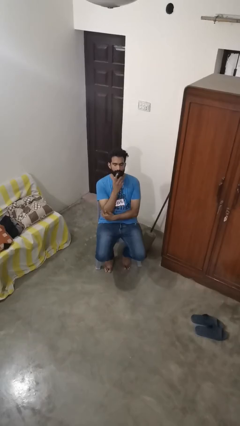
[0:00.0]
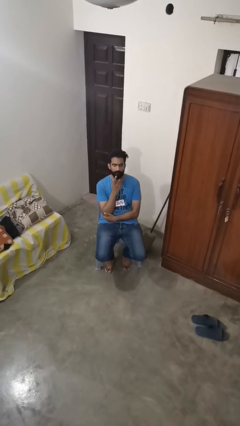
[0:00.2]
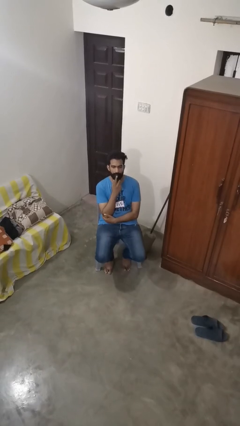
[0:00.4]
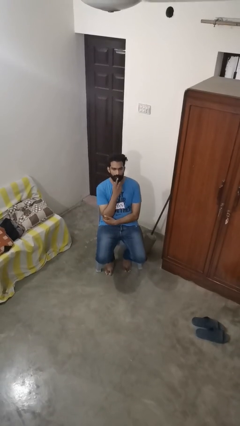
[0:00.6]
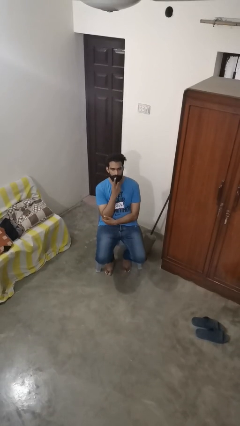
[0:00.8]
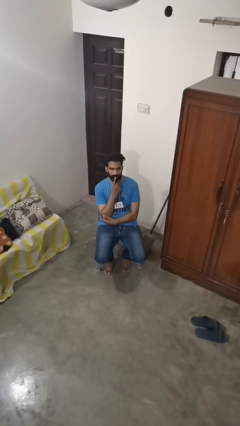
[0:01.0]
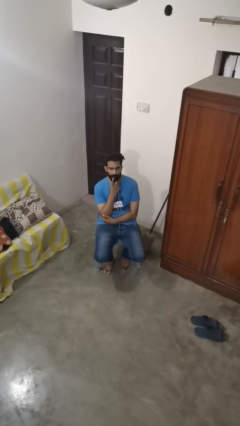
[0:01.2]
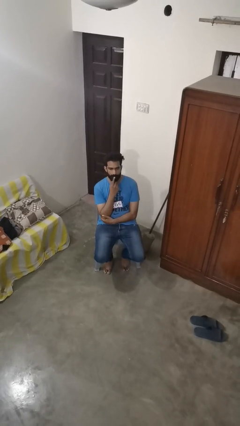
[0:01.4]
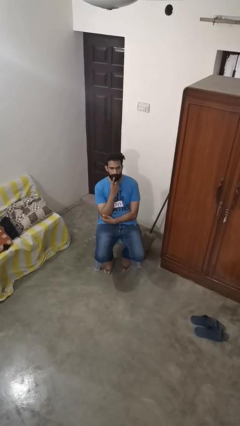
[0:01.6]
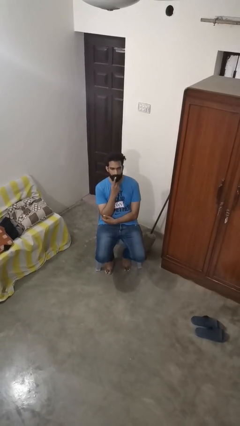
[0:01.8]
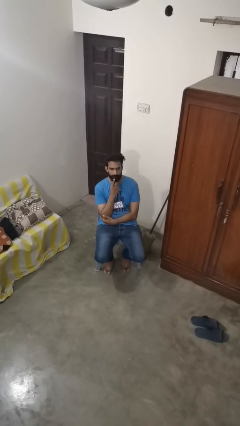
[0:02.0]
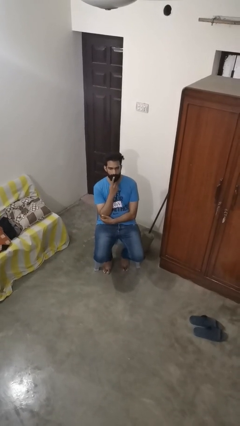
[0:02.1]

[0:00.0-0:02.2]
person strokes chin

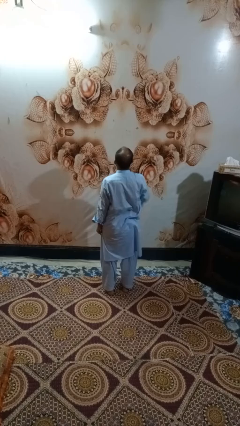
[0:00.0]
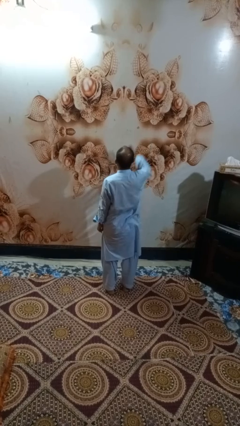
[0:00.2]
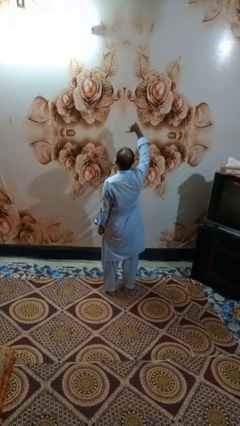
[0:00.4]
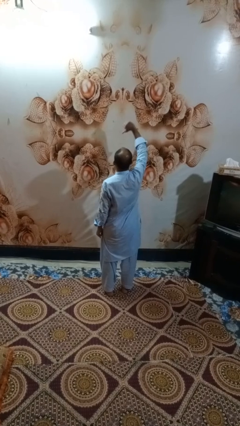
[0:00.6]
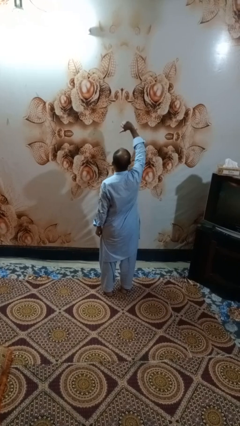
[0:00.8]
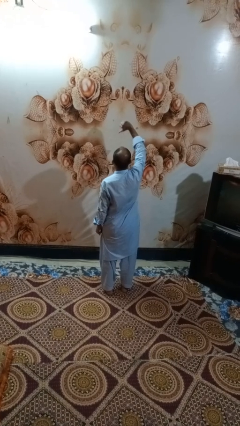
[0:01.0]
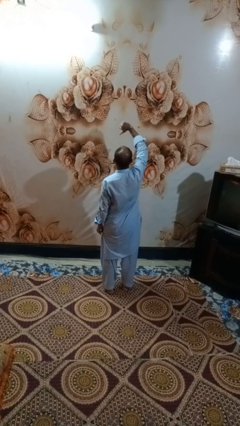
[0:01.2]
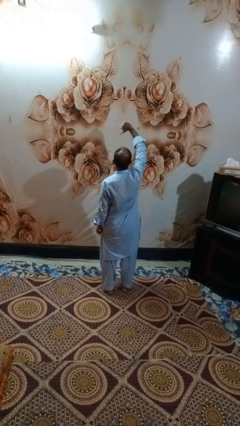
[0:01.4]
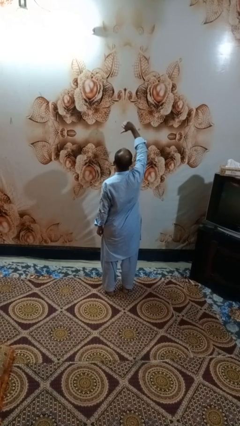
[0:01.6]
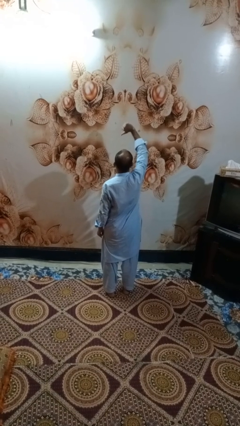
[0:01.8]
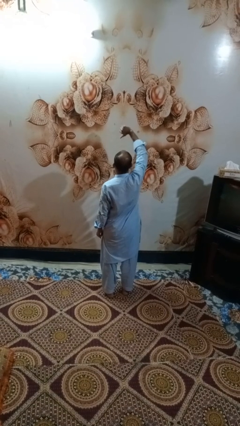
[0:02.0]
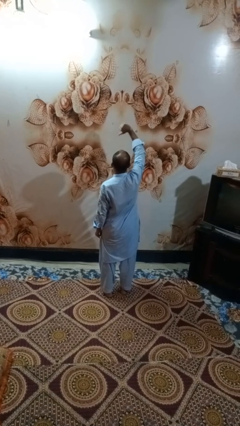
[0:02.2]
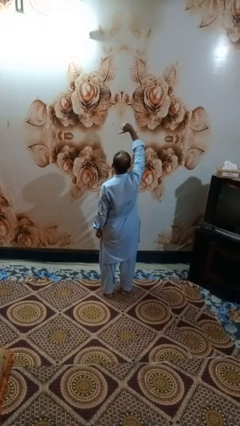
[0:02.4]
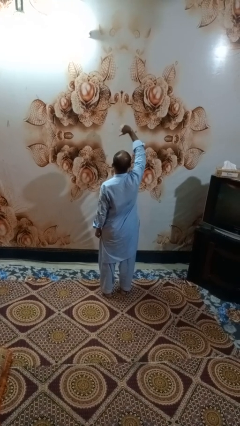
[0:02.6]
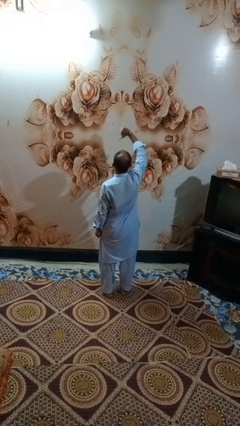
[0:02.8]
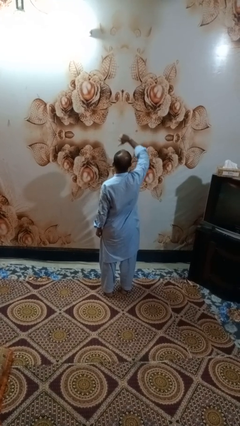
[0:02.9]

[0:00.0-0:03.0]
person gestures thumbs down

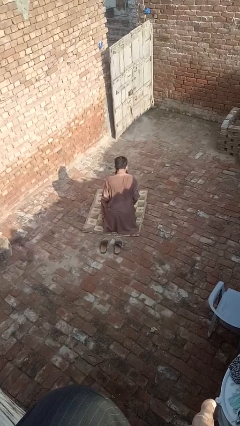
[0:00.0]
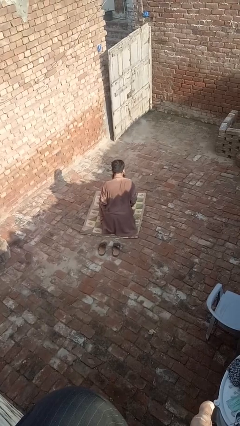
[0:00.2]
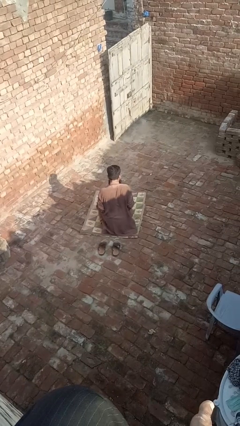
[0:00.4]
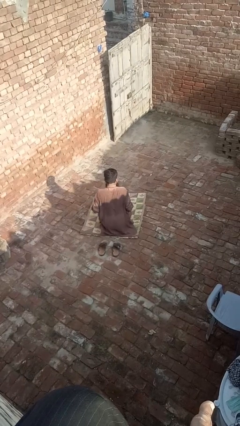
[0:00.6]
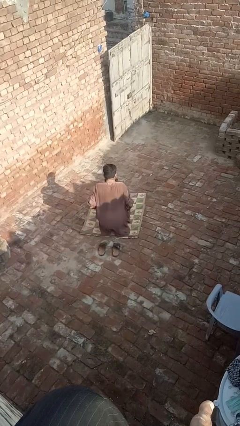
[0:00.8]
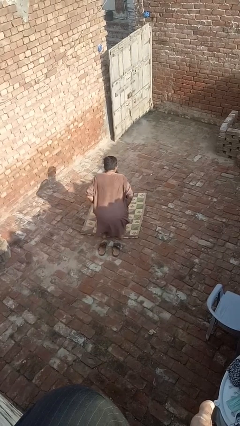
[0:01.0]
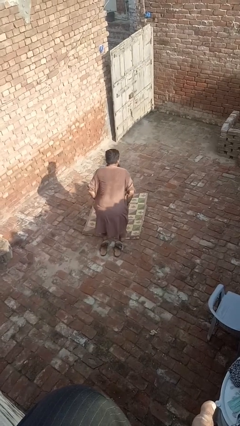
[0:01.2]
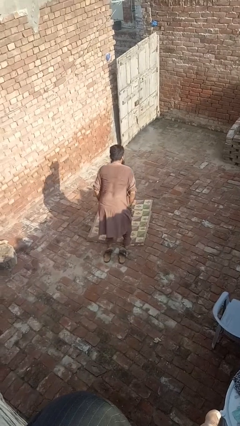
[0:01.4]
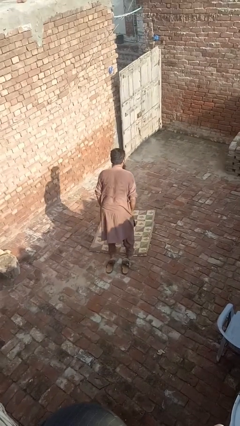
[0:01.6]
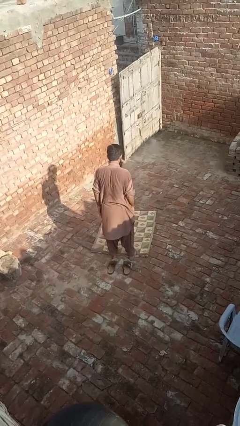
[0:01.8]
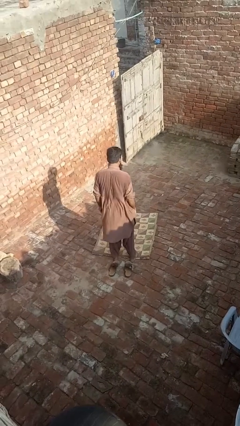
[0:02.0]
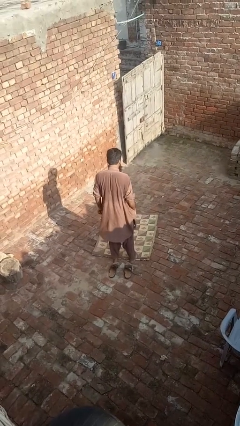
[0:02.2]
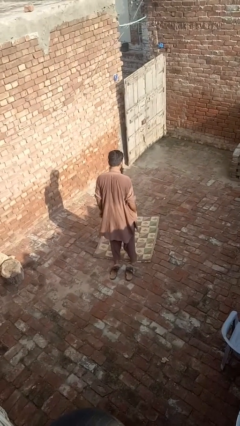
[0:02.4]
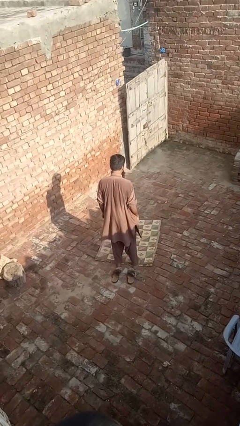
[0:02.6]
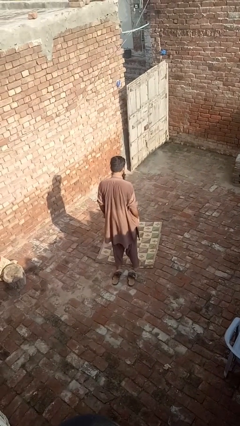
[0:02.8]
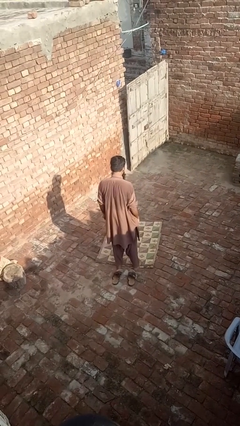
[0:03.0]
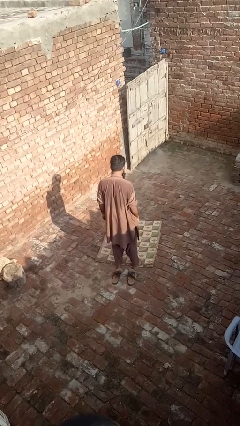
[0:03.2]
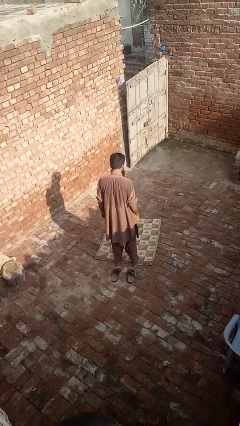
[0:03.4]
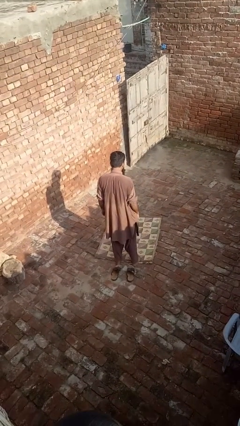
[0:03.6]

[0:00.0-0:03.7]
person stands up from floor

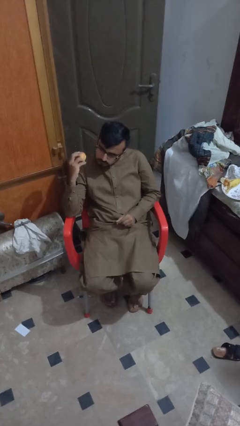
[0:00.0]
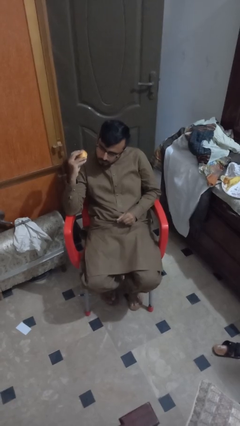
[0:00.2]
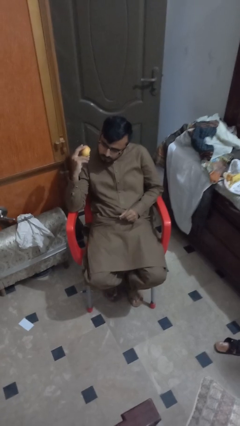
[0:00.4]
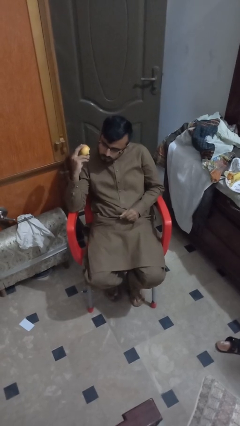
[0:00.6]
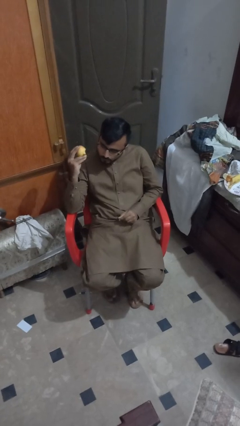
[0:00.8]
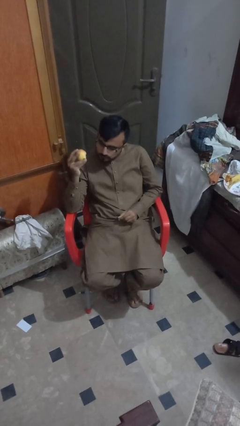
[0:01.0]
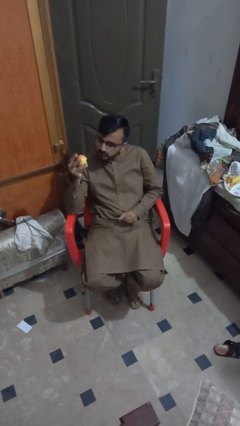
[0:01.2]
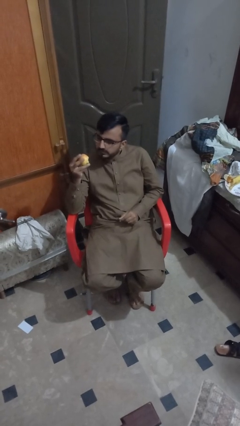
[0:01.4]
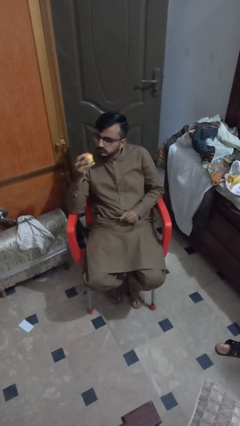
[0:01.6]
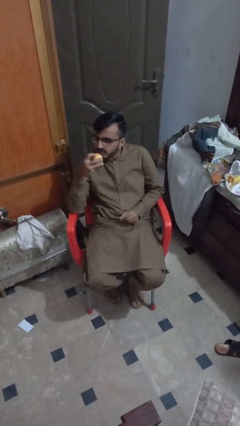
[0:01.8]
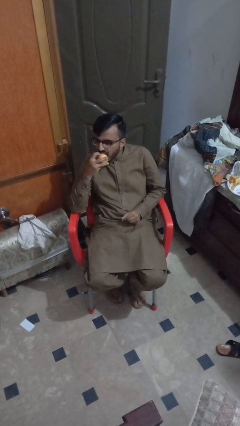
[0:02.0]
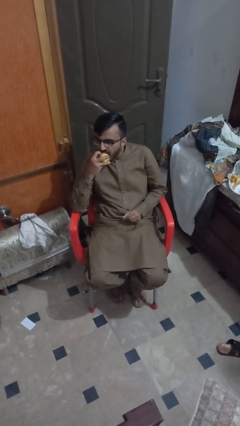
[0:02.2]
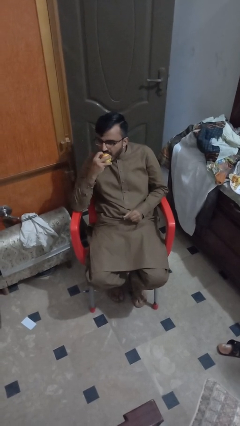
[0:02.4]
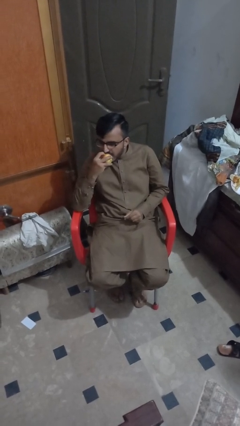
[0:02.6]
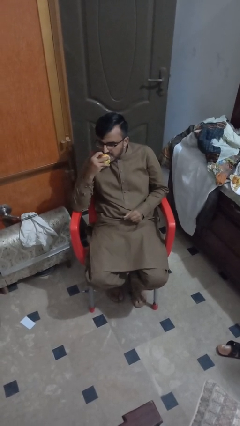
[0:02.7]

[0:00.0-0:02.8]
person eats apple

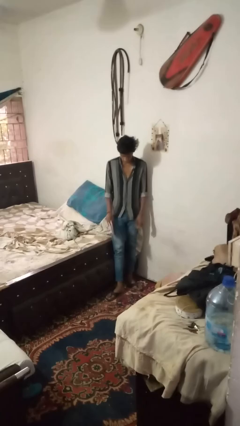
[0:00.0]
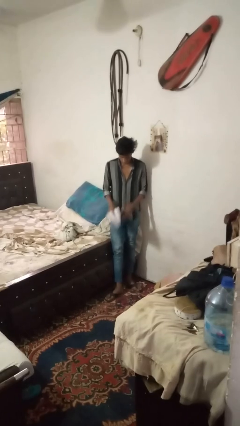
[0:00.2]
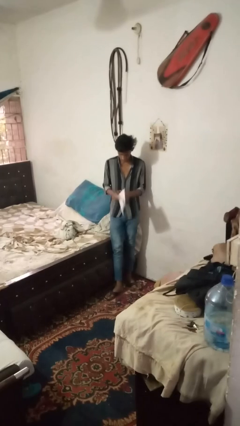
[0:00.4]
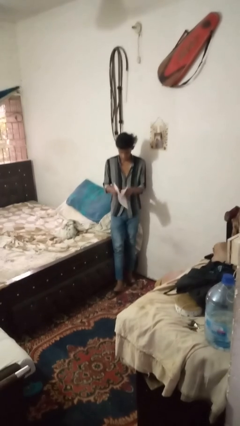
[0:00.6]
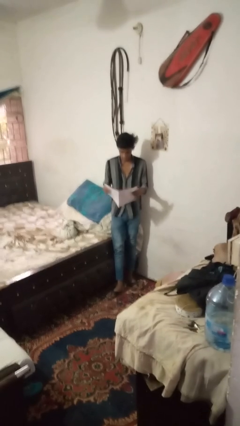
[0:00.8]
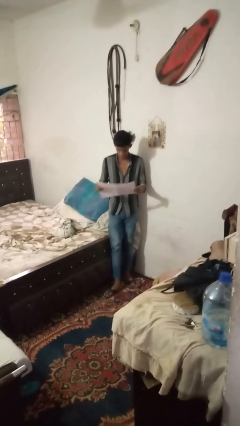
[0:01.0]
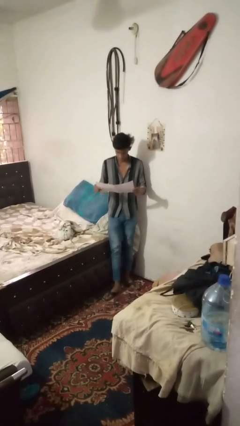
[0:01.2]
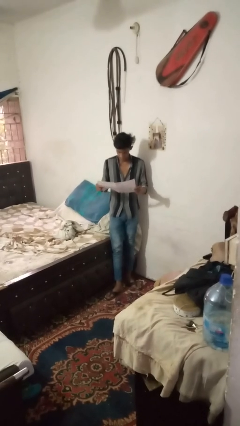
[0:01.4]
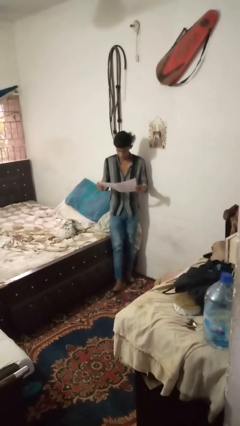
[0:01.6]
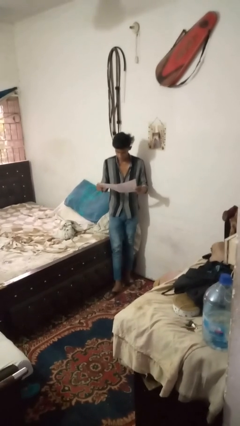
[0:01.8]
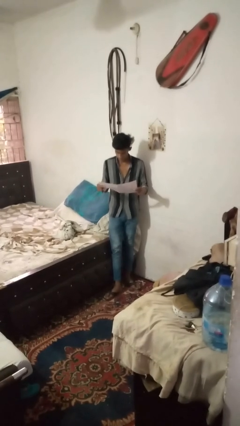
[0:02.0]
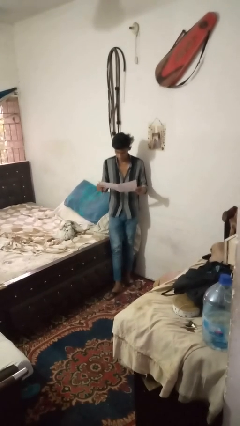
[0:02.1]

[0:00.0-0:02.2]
person reads newspaper

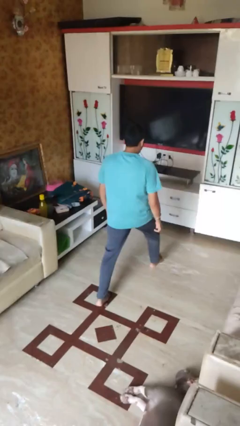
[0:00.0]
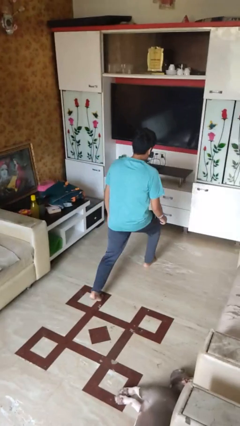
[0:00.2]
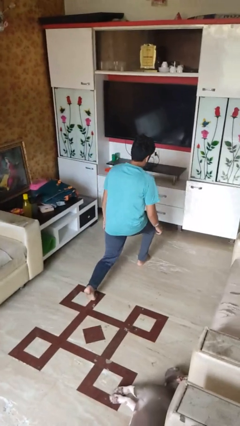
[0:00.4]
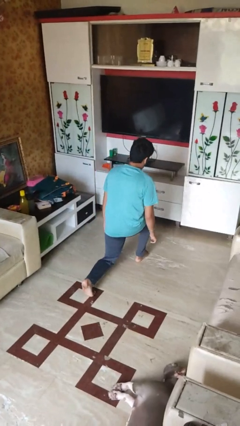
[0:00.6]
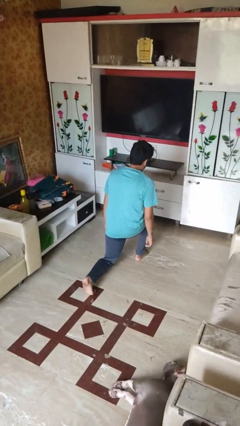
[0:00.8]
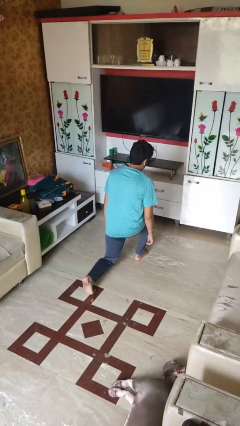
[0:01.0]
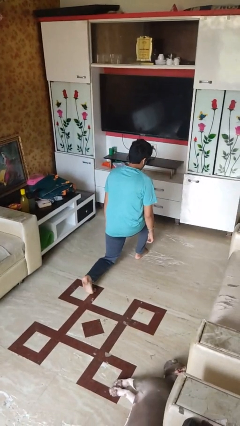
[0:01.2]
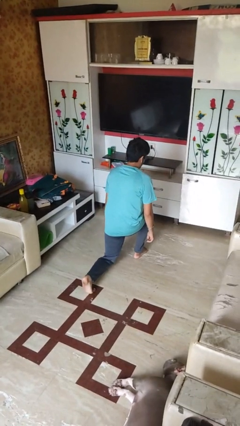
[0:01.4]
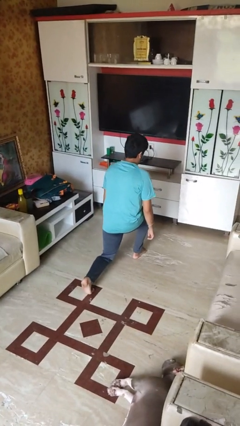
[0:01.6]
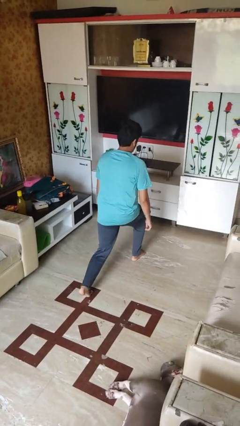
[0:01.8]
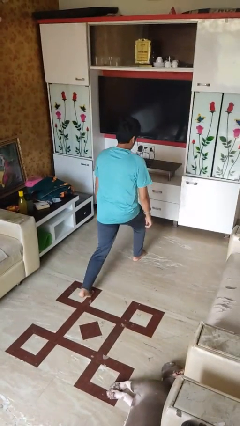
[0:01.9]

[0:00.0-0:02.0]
person exercises with lunges

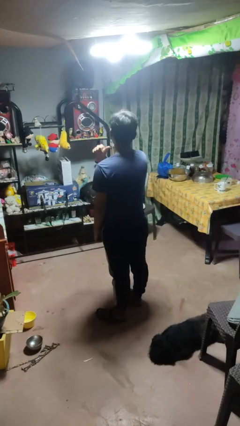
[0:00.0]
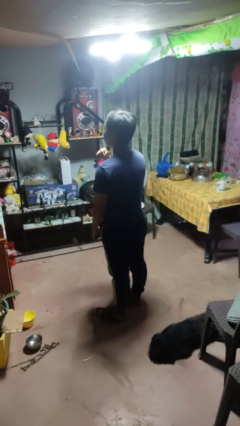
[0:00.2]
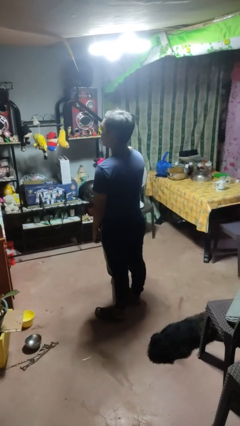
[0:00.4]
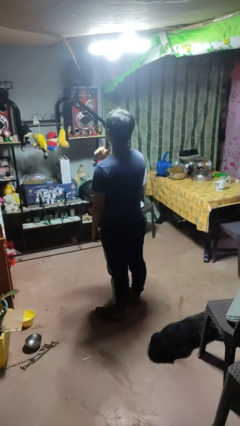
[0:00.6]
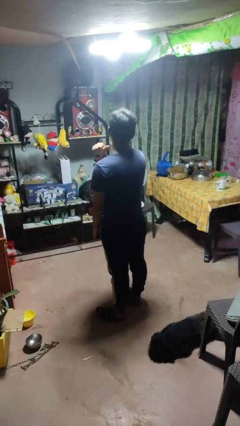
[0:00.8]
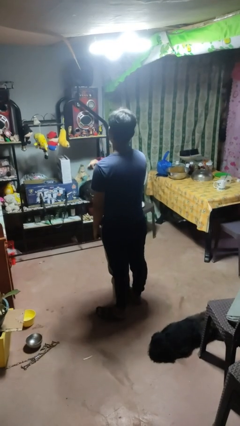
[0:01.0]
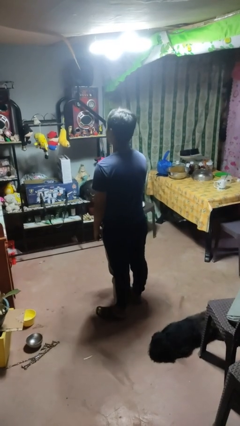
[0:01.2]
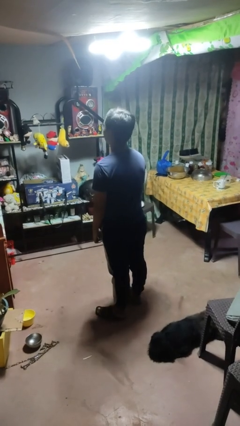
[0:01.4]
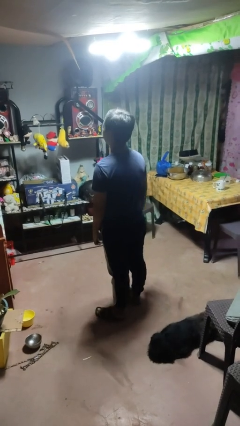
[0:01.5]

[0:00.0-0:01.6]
person gestures cut
